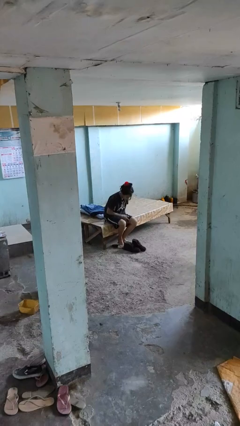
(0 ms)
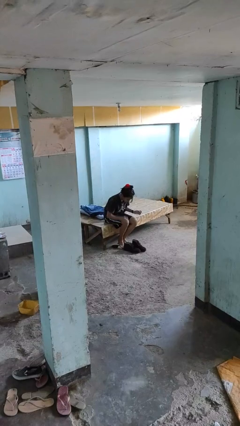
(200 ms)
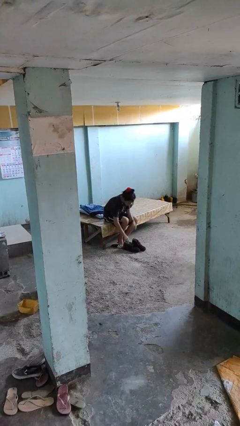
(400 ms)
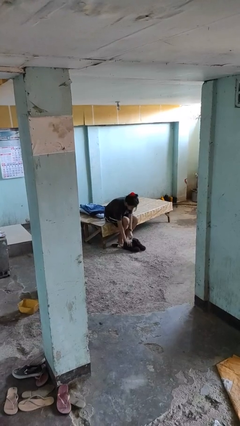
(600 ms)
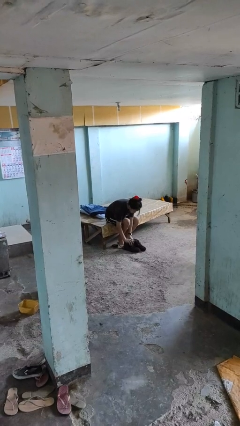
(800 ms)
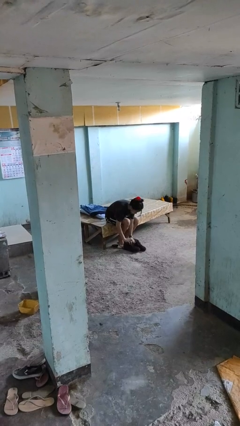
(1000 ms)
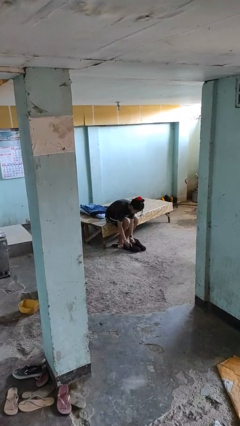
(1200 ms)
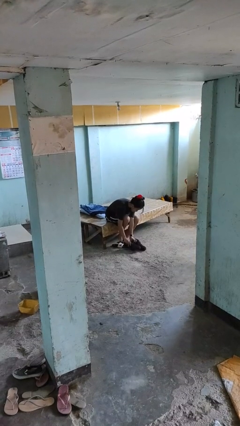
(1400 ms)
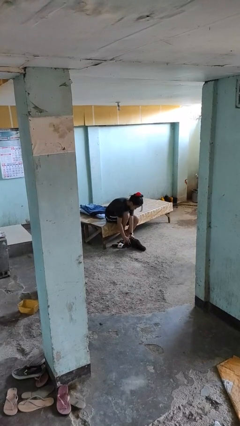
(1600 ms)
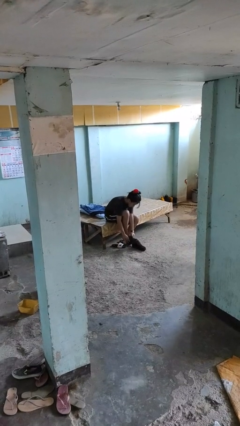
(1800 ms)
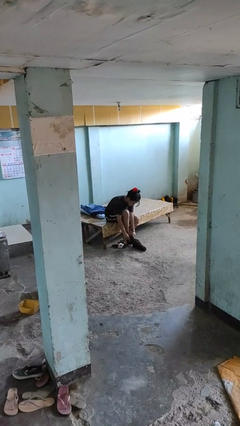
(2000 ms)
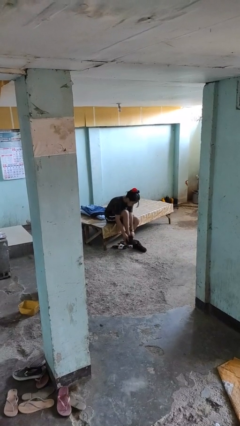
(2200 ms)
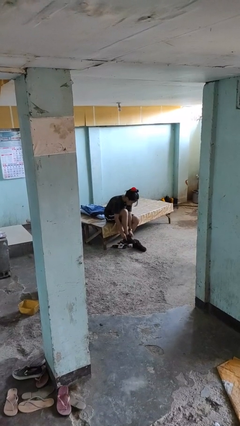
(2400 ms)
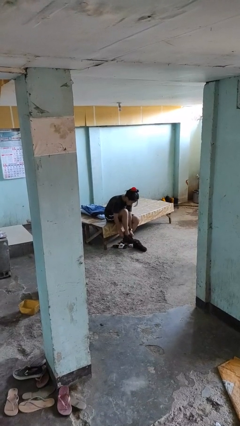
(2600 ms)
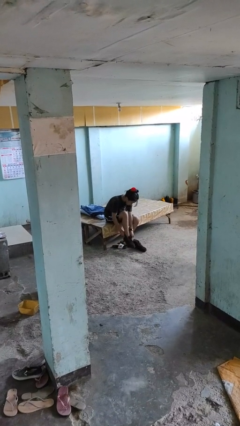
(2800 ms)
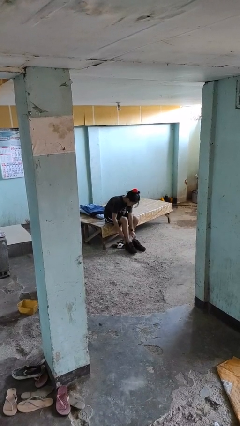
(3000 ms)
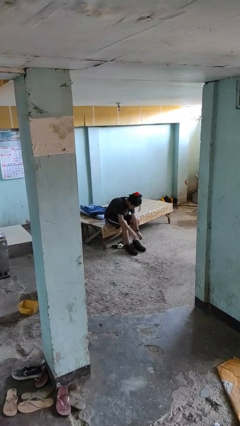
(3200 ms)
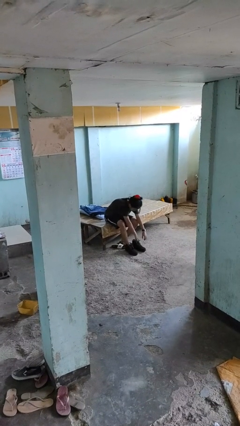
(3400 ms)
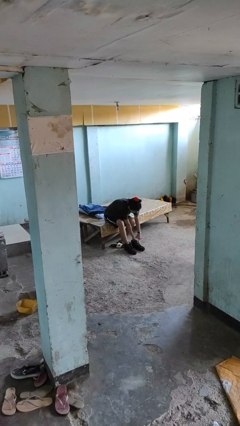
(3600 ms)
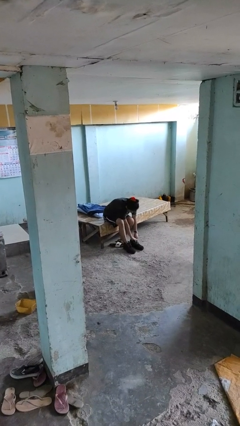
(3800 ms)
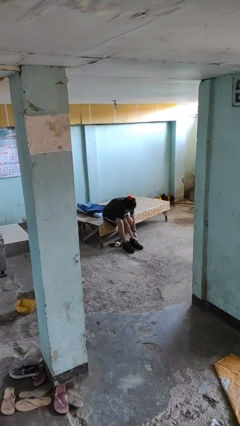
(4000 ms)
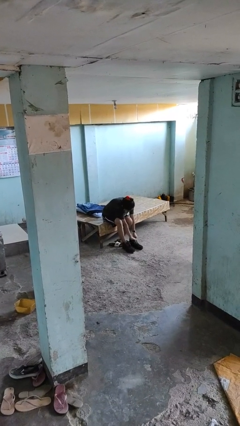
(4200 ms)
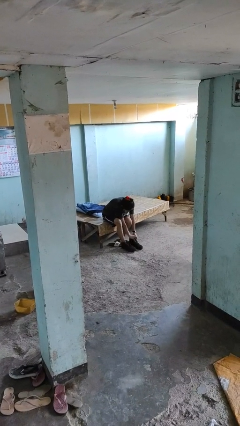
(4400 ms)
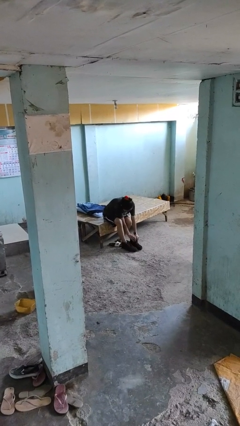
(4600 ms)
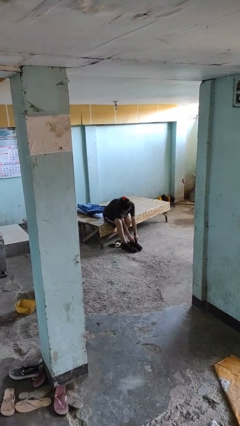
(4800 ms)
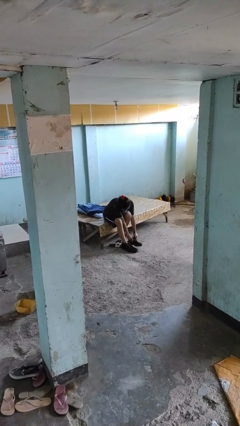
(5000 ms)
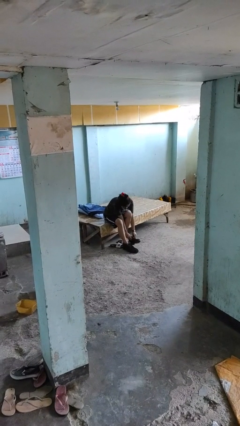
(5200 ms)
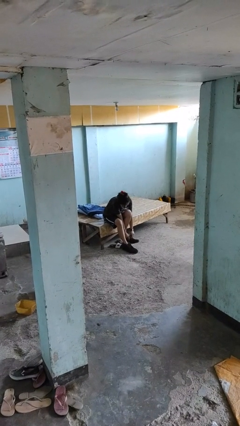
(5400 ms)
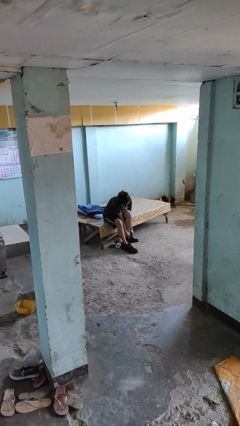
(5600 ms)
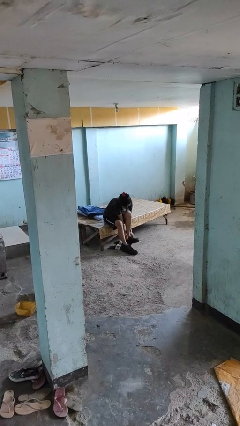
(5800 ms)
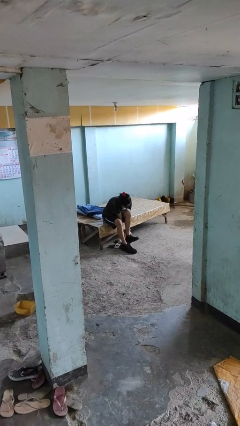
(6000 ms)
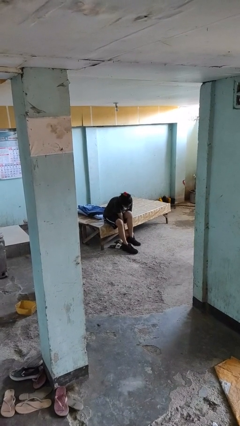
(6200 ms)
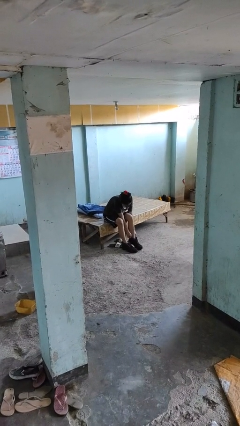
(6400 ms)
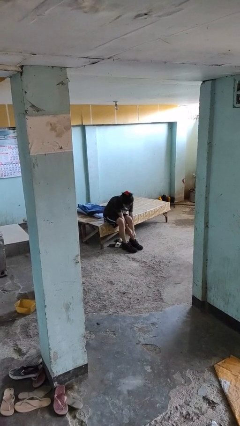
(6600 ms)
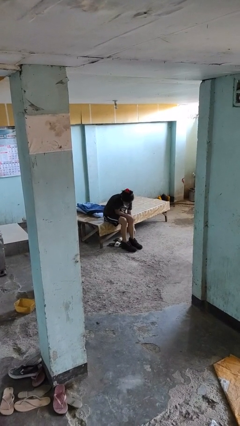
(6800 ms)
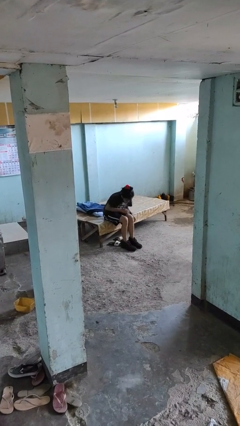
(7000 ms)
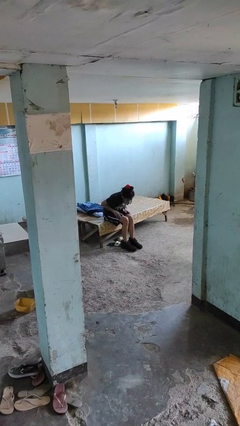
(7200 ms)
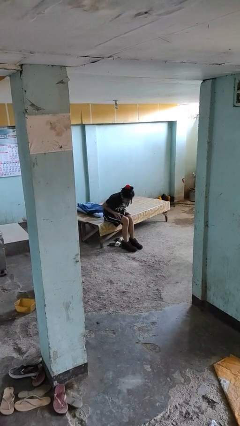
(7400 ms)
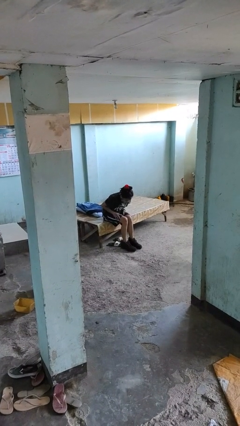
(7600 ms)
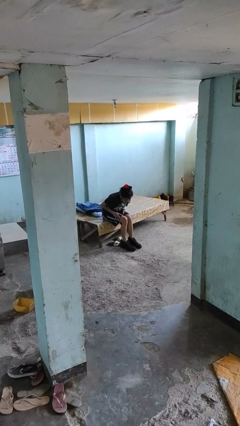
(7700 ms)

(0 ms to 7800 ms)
person puts on boots

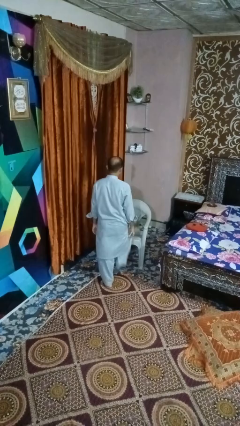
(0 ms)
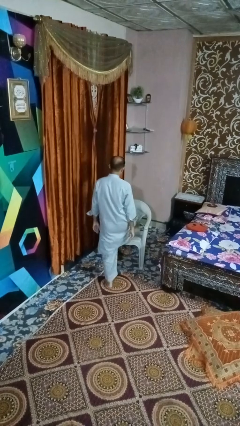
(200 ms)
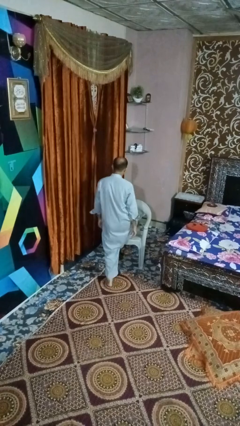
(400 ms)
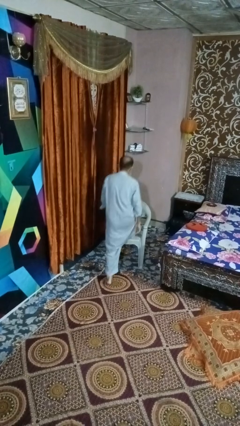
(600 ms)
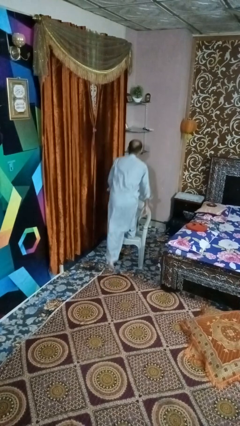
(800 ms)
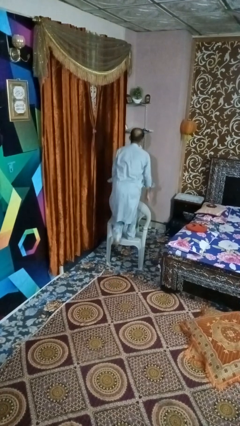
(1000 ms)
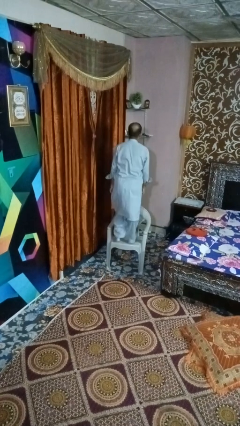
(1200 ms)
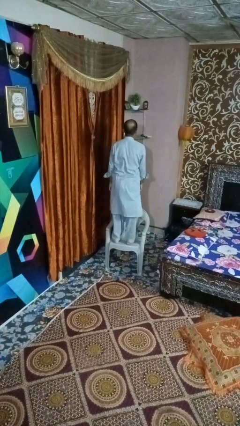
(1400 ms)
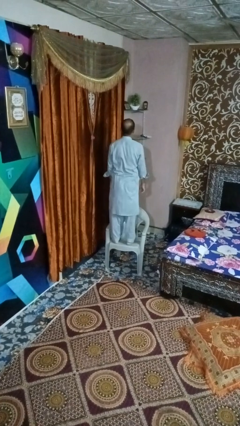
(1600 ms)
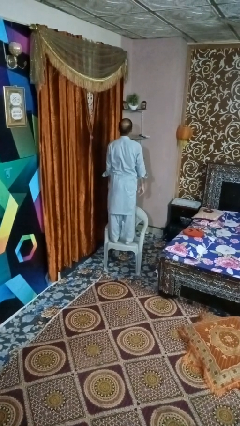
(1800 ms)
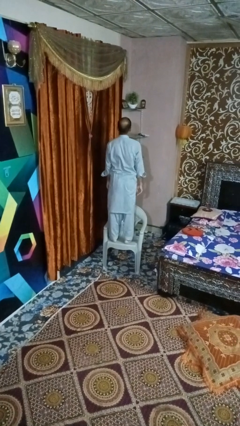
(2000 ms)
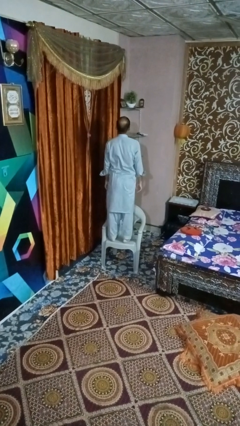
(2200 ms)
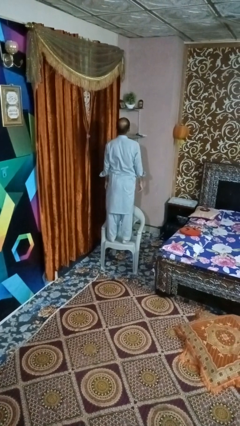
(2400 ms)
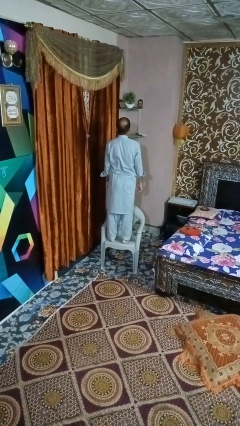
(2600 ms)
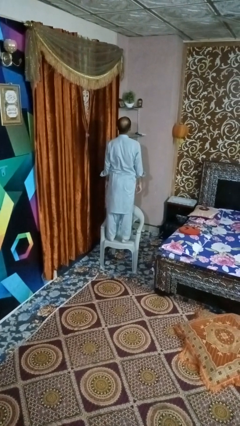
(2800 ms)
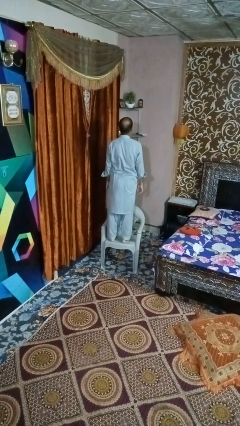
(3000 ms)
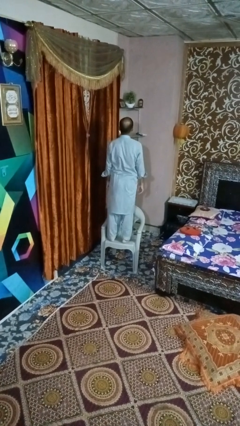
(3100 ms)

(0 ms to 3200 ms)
person climbs on chair

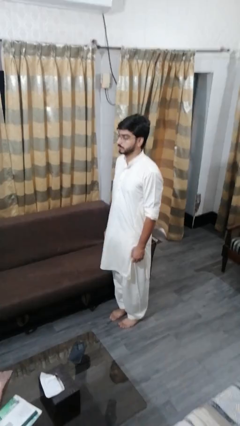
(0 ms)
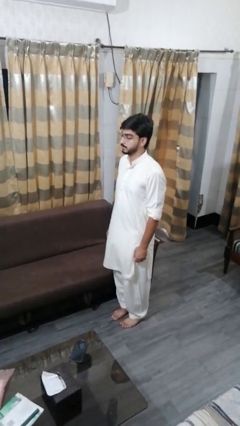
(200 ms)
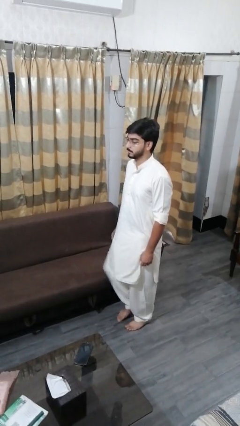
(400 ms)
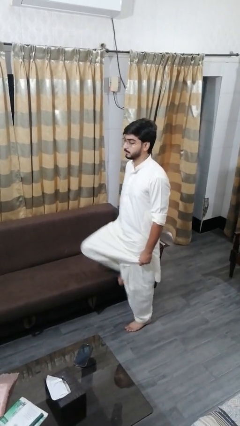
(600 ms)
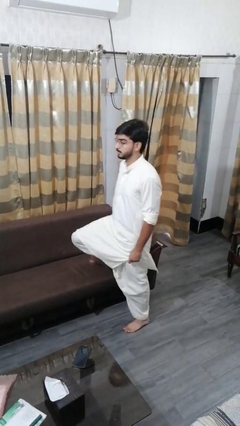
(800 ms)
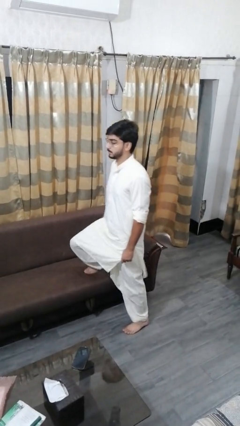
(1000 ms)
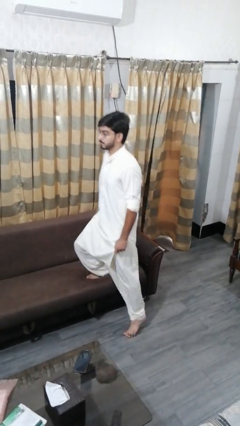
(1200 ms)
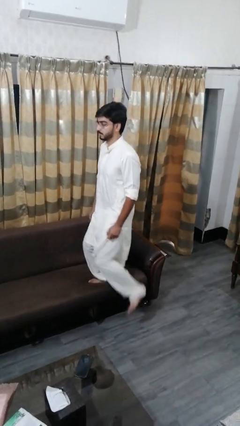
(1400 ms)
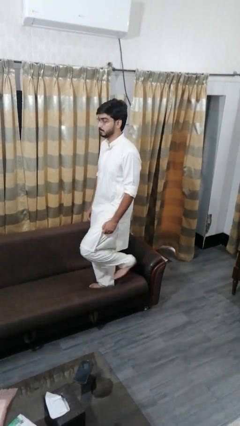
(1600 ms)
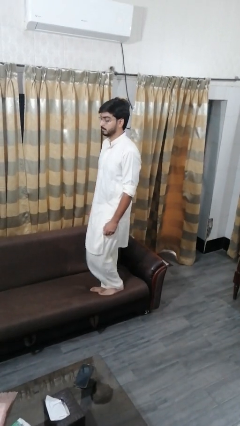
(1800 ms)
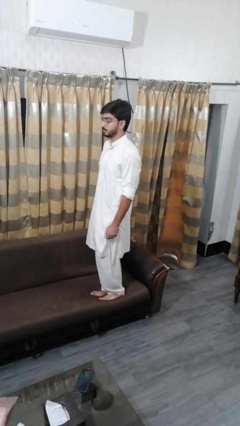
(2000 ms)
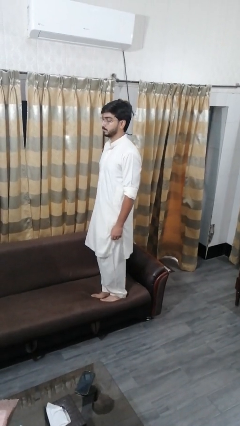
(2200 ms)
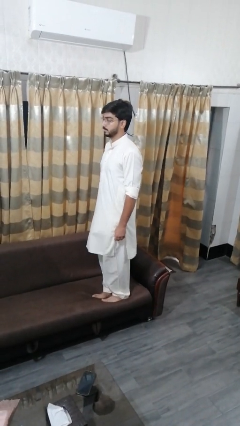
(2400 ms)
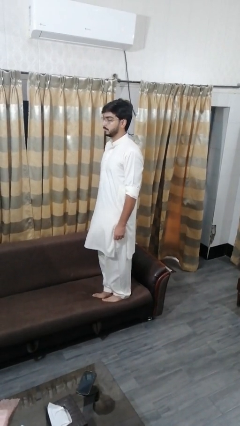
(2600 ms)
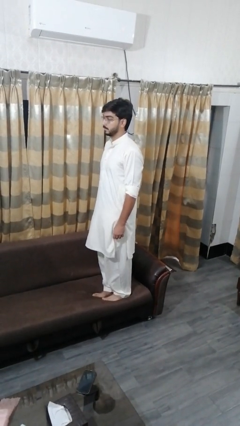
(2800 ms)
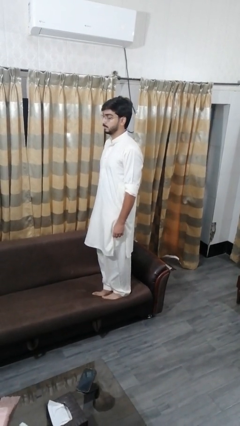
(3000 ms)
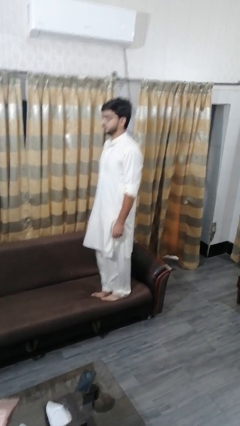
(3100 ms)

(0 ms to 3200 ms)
person climbs on couch

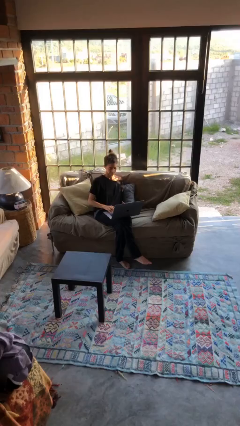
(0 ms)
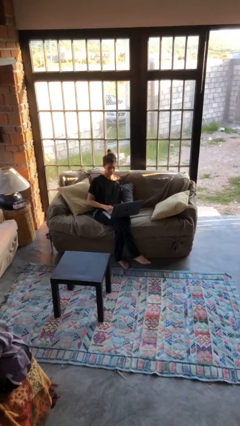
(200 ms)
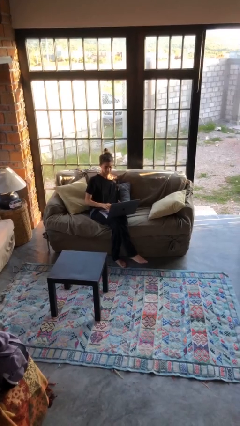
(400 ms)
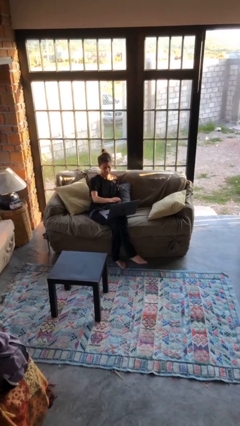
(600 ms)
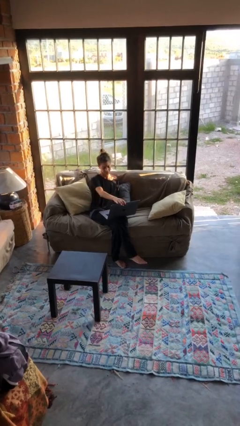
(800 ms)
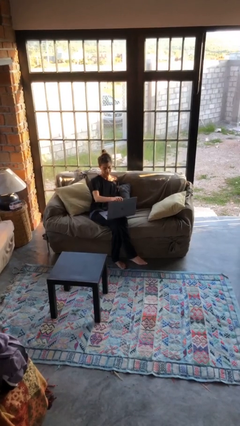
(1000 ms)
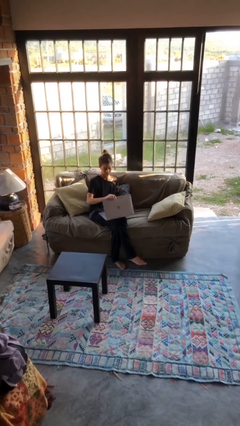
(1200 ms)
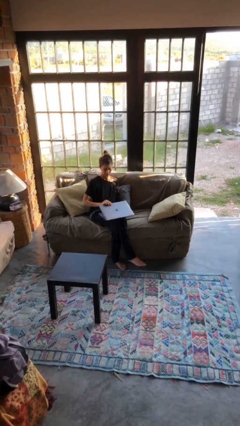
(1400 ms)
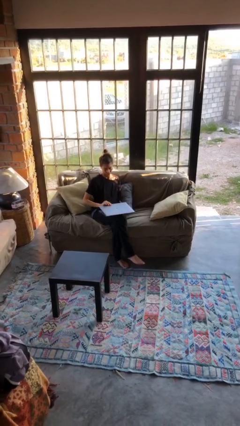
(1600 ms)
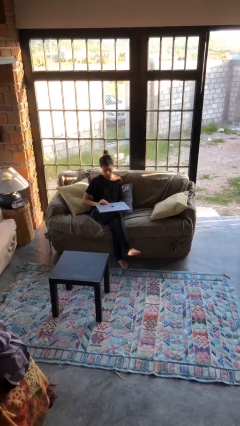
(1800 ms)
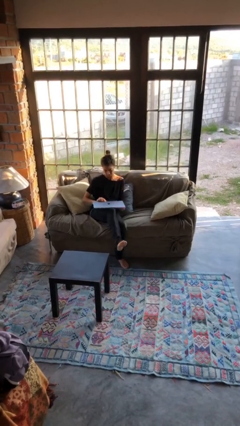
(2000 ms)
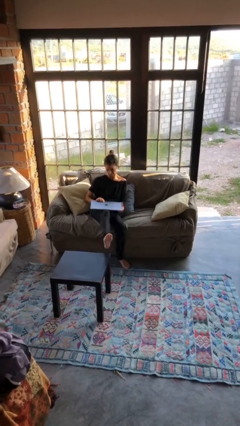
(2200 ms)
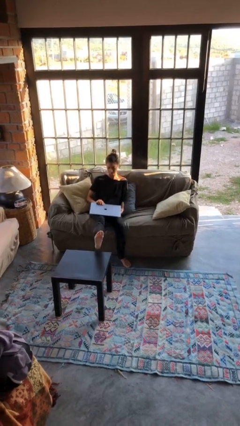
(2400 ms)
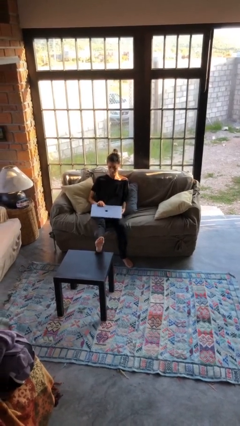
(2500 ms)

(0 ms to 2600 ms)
person closes laptop

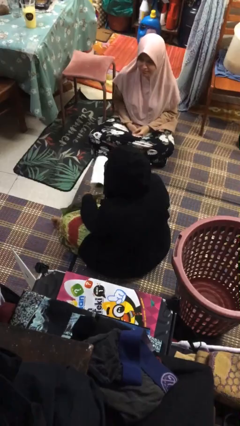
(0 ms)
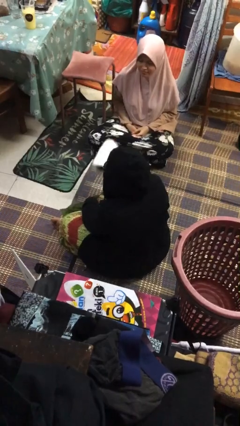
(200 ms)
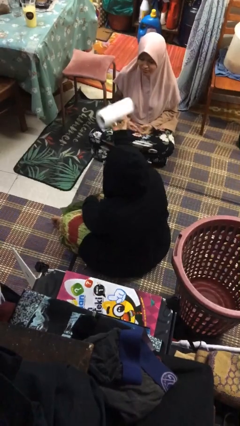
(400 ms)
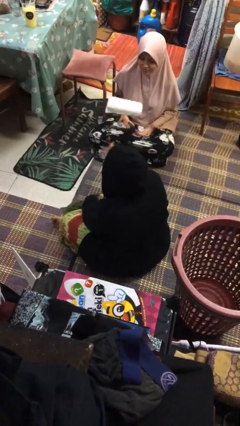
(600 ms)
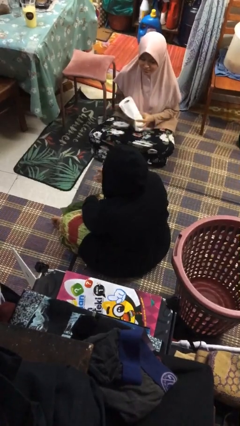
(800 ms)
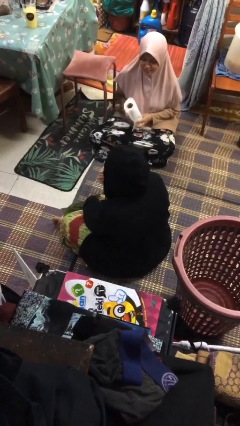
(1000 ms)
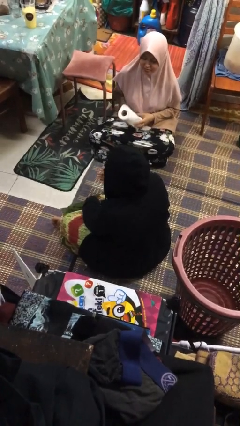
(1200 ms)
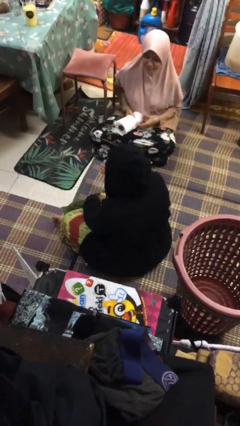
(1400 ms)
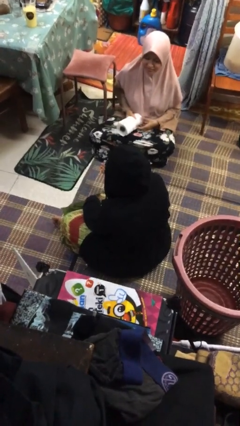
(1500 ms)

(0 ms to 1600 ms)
person throws object to person
